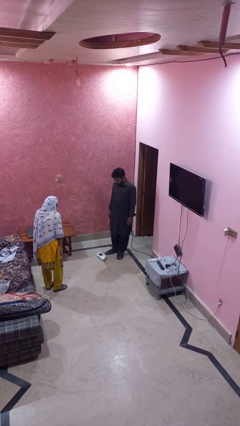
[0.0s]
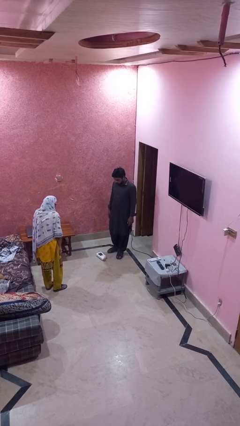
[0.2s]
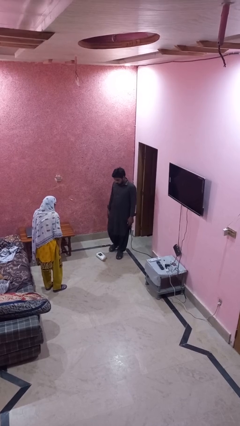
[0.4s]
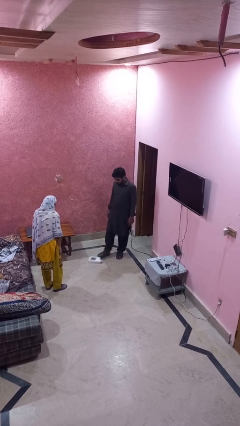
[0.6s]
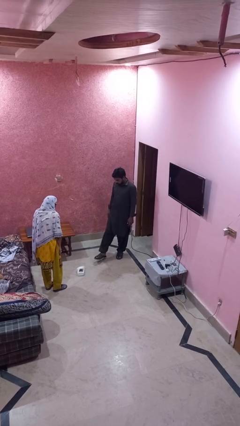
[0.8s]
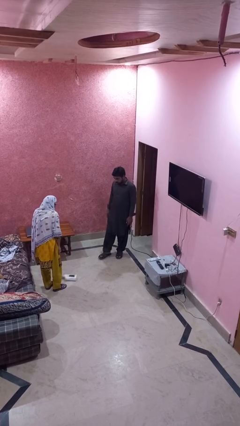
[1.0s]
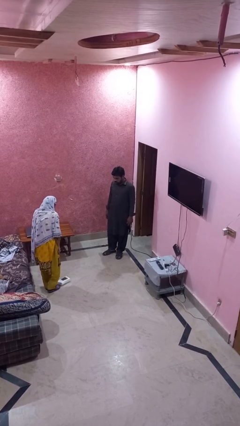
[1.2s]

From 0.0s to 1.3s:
person kicks object to person

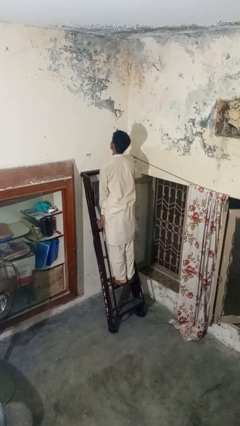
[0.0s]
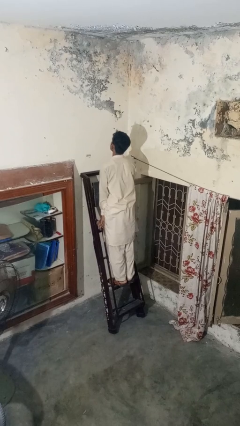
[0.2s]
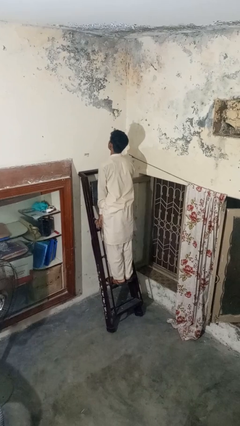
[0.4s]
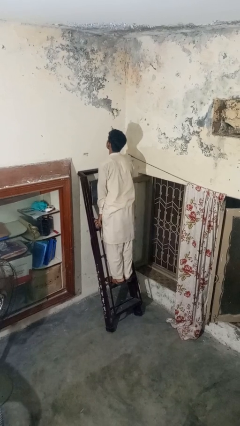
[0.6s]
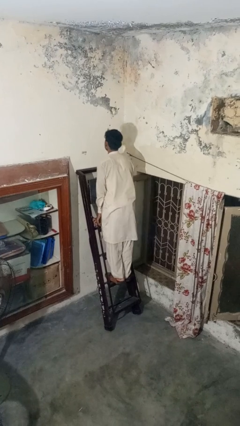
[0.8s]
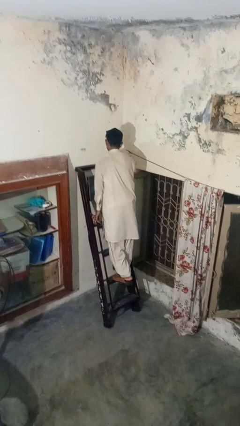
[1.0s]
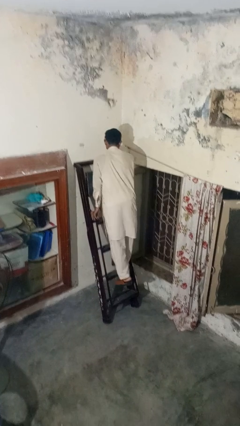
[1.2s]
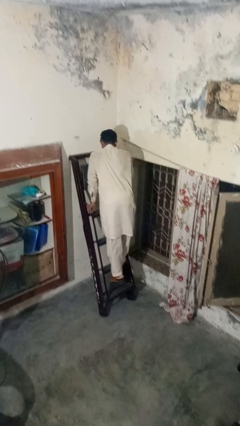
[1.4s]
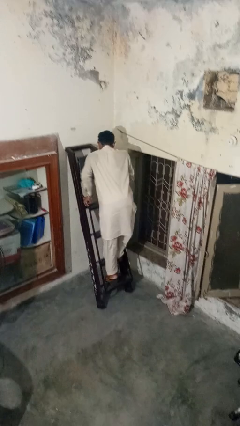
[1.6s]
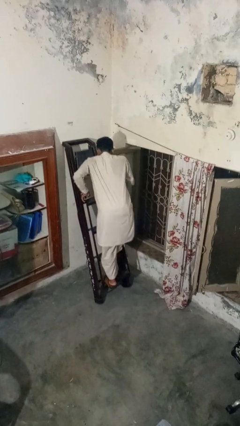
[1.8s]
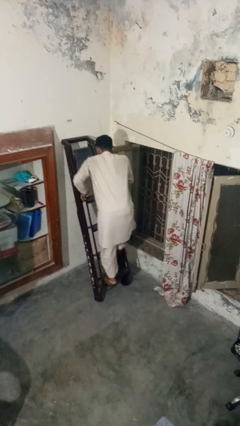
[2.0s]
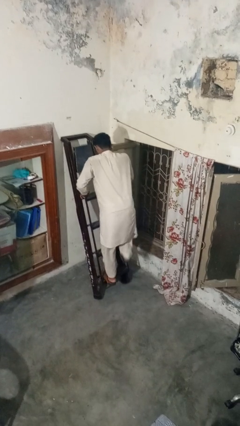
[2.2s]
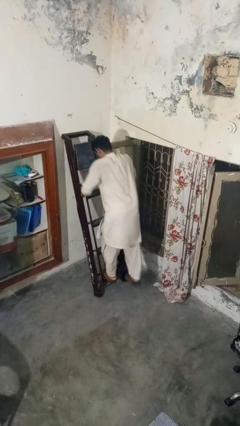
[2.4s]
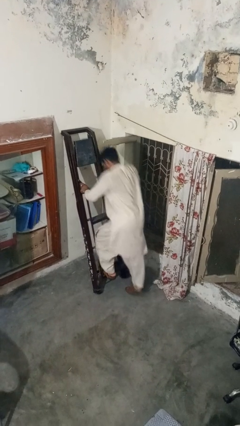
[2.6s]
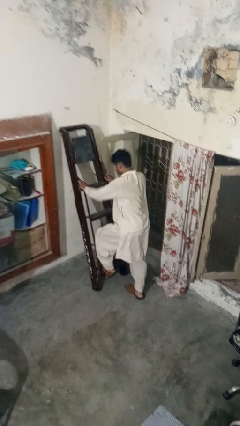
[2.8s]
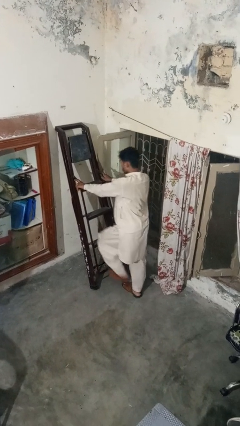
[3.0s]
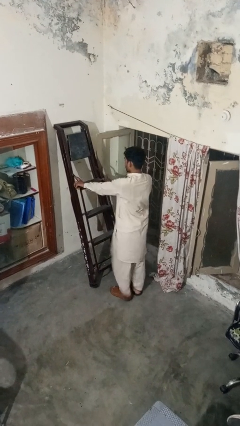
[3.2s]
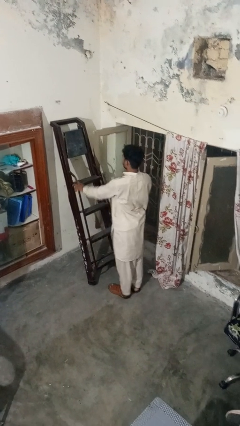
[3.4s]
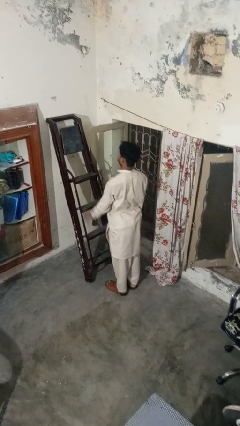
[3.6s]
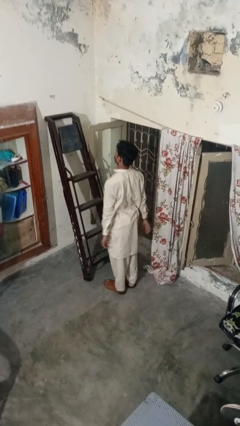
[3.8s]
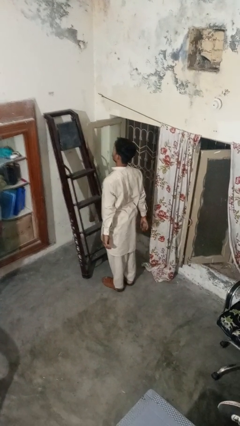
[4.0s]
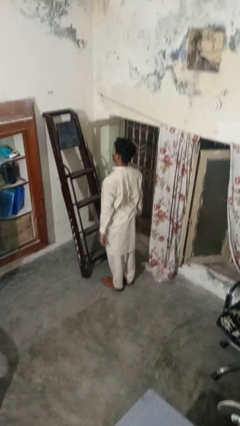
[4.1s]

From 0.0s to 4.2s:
person climbs down ladder

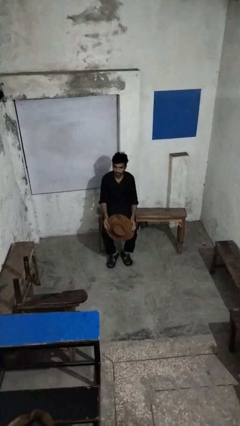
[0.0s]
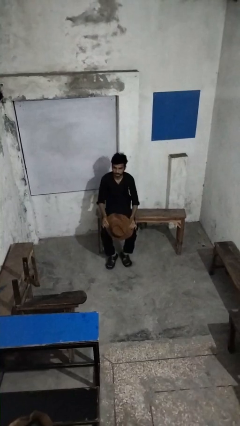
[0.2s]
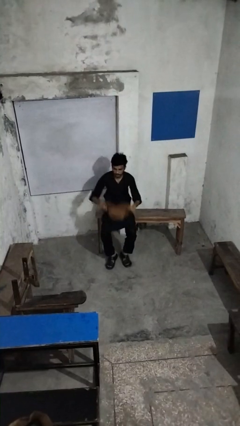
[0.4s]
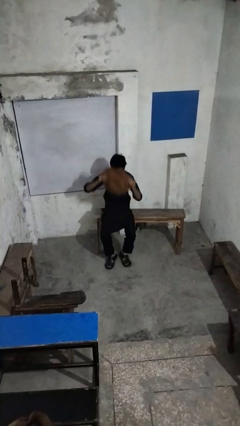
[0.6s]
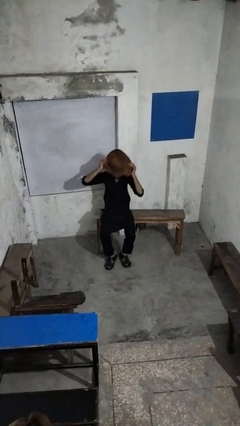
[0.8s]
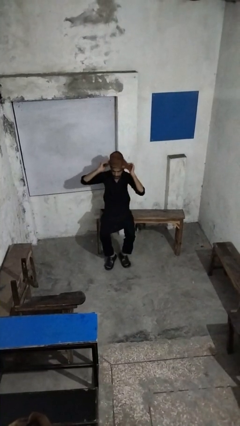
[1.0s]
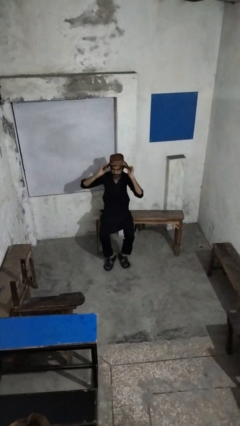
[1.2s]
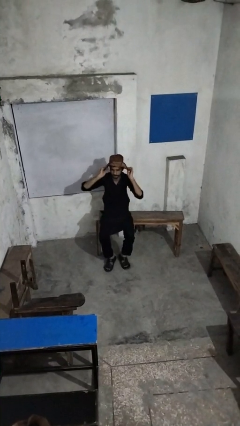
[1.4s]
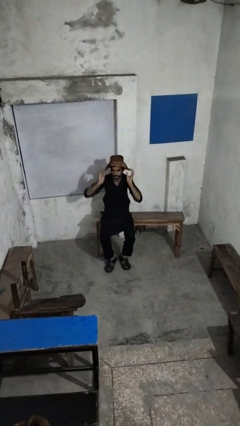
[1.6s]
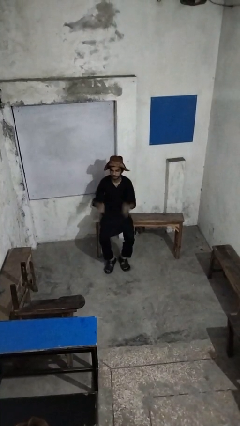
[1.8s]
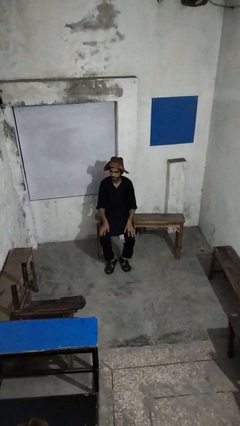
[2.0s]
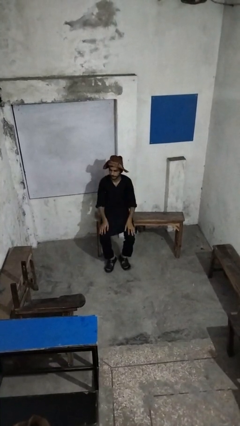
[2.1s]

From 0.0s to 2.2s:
person puts on hat

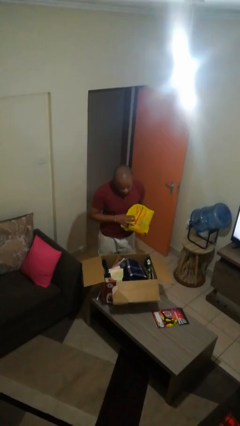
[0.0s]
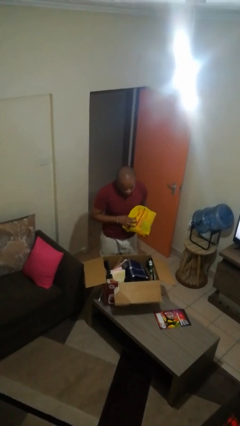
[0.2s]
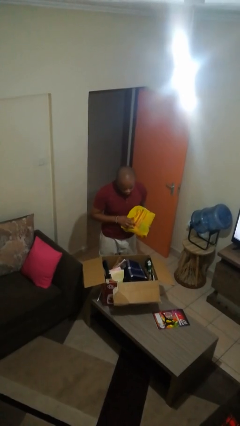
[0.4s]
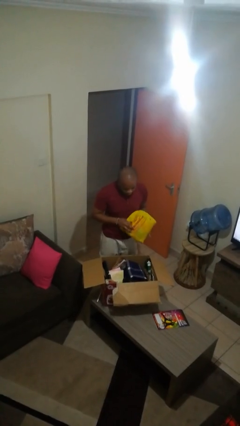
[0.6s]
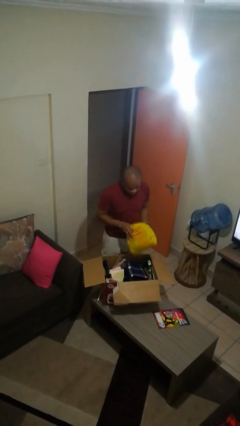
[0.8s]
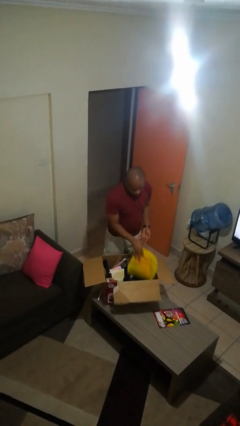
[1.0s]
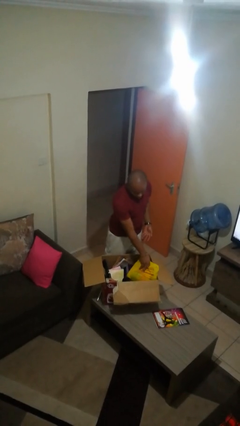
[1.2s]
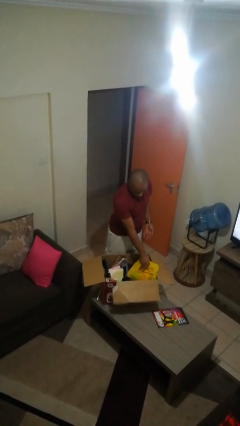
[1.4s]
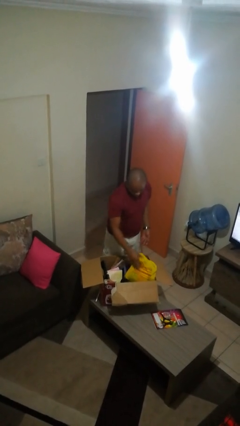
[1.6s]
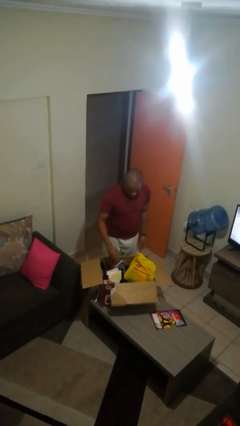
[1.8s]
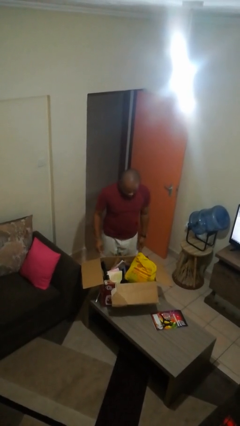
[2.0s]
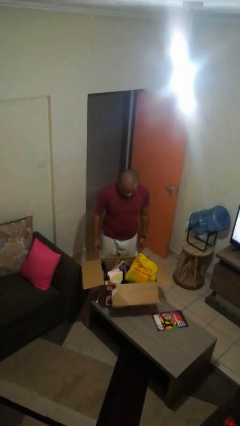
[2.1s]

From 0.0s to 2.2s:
person puts object into box

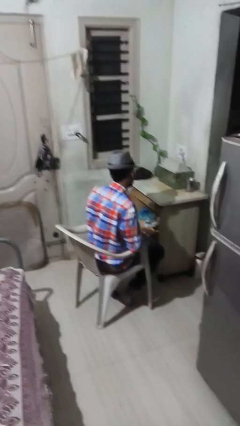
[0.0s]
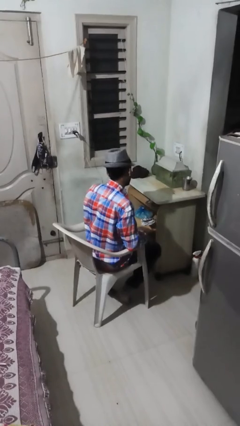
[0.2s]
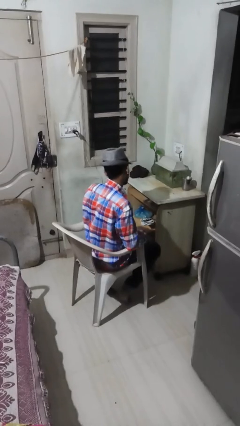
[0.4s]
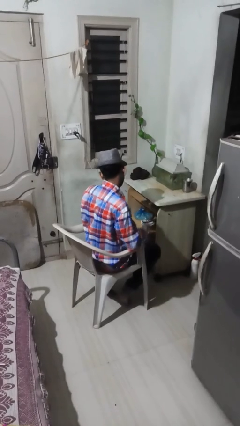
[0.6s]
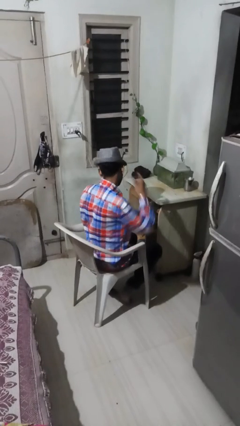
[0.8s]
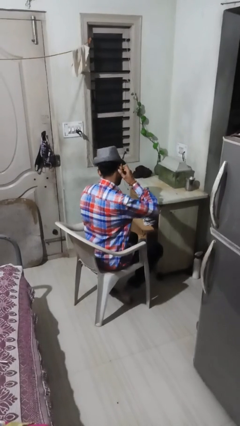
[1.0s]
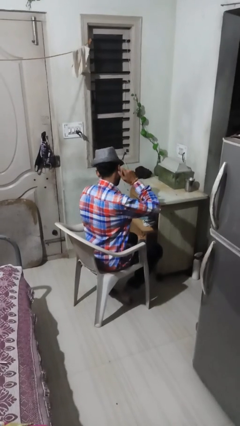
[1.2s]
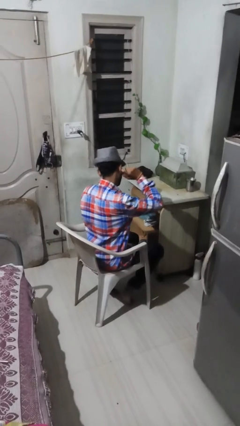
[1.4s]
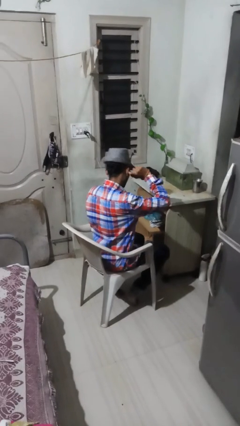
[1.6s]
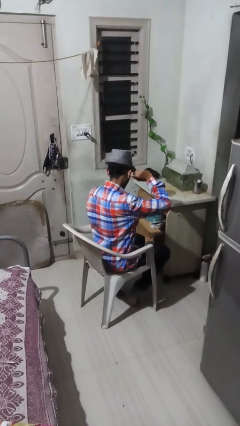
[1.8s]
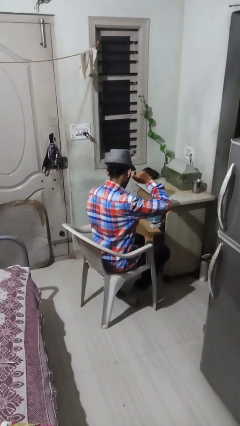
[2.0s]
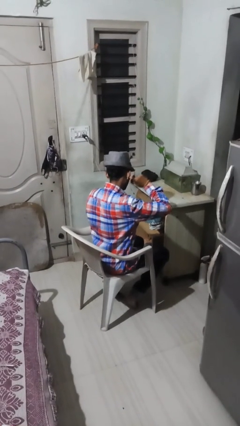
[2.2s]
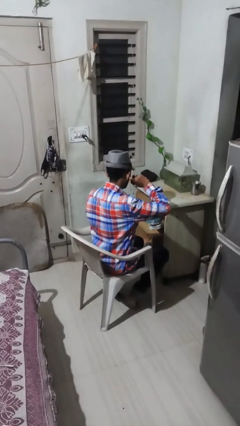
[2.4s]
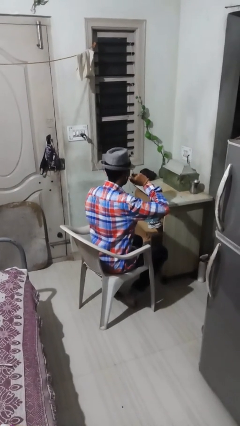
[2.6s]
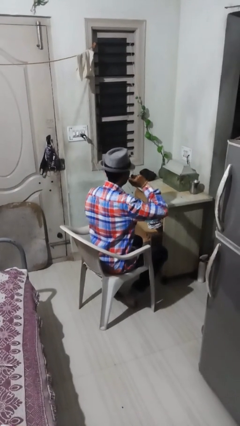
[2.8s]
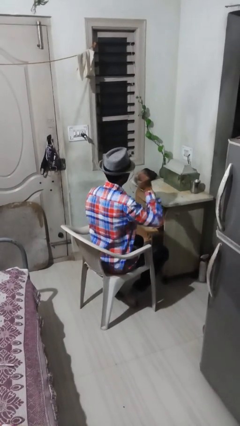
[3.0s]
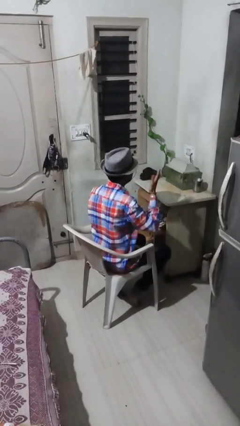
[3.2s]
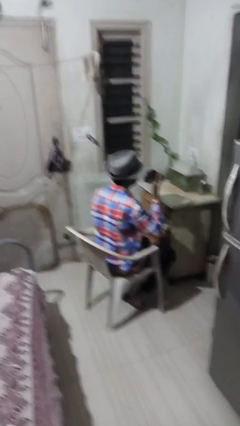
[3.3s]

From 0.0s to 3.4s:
person puts fingers in ear

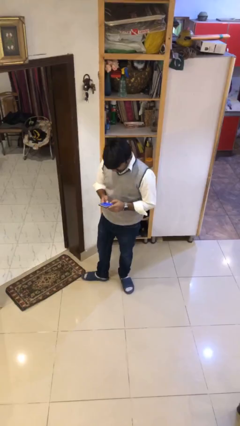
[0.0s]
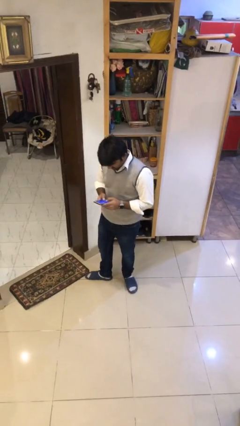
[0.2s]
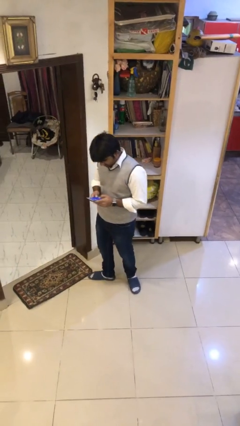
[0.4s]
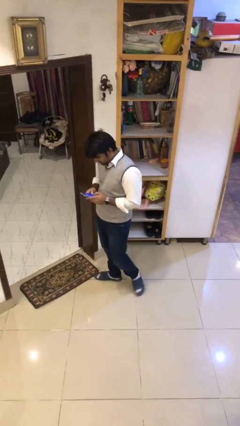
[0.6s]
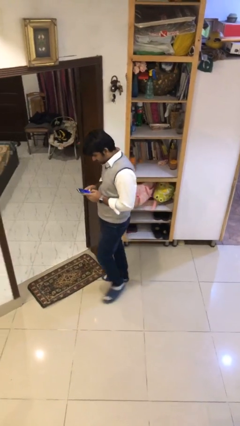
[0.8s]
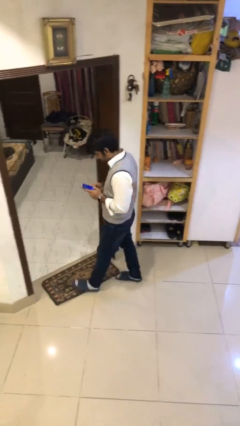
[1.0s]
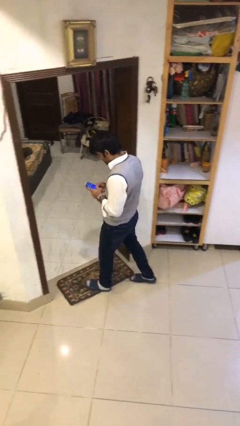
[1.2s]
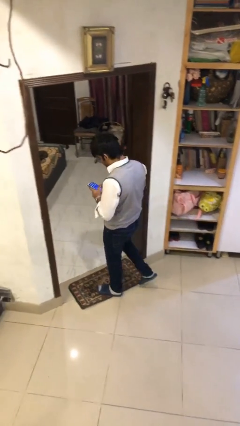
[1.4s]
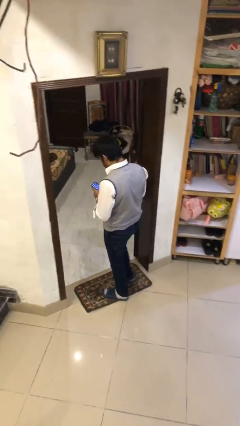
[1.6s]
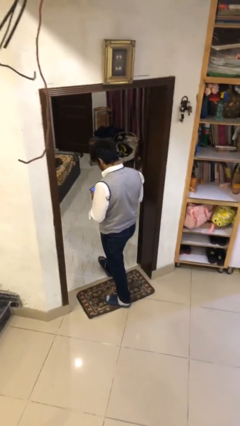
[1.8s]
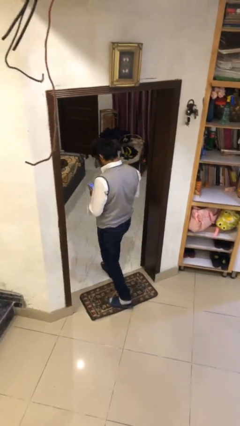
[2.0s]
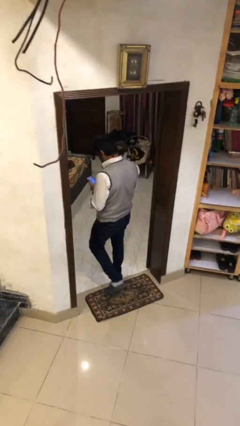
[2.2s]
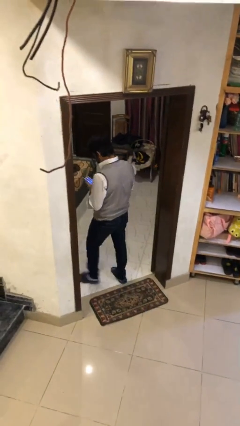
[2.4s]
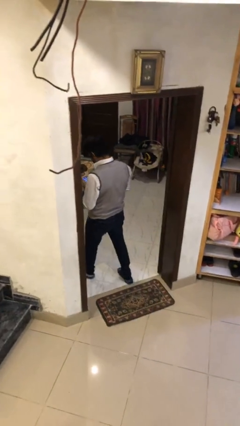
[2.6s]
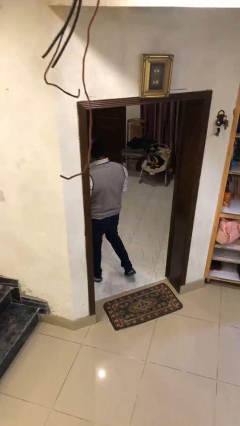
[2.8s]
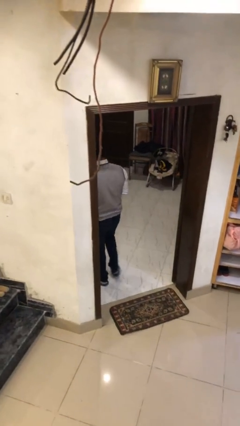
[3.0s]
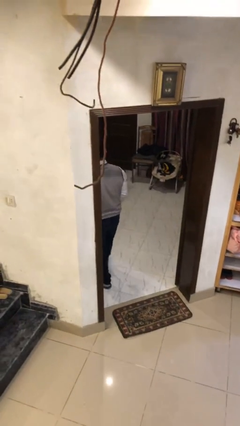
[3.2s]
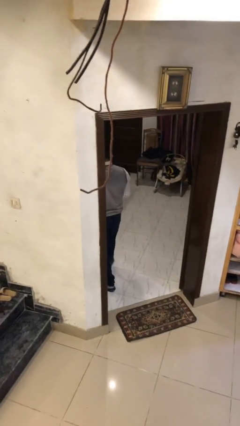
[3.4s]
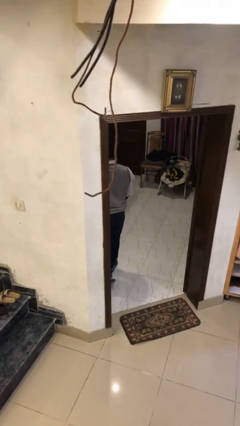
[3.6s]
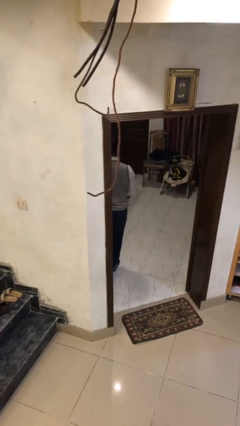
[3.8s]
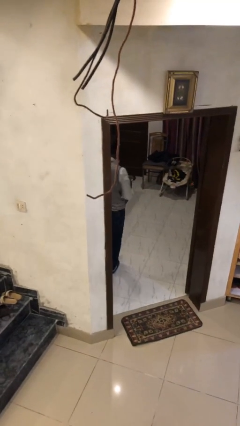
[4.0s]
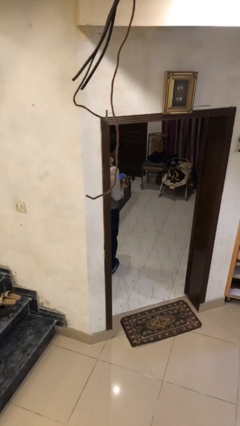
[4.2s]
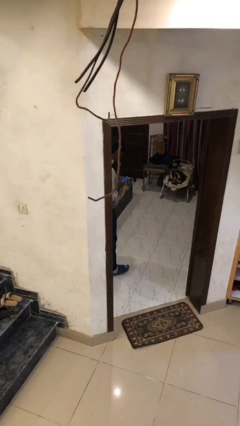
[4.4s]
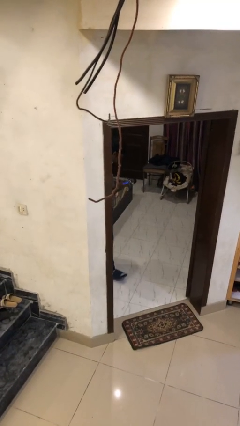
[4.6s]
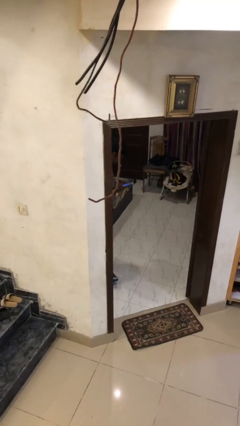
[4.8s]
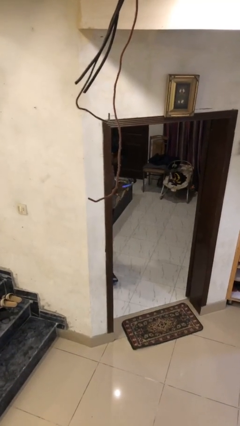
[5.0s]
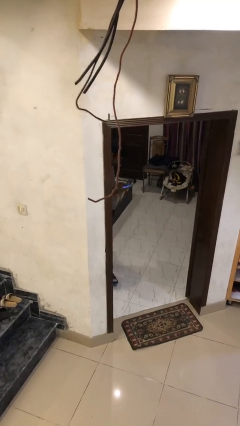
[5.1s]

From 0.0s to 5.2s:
person exits scene through structure
